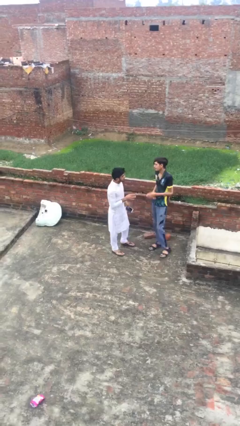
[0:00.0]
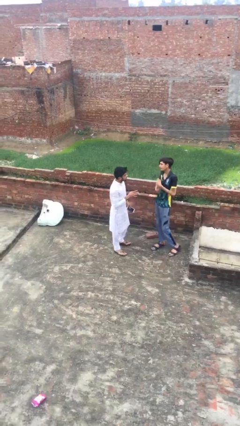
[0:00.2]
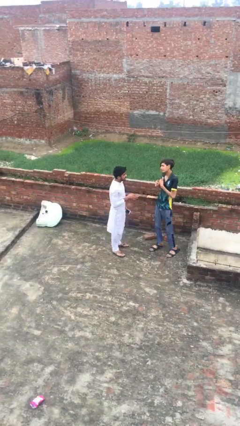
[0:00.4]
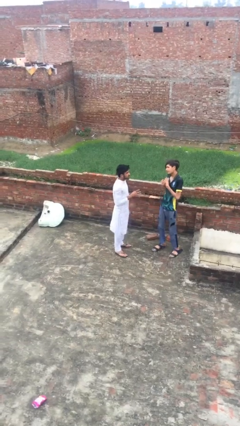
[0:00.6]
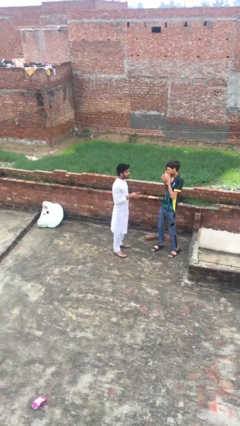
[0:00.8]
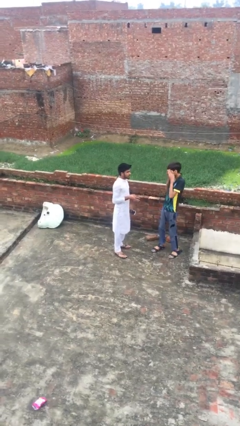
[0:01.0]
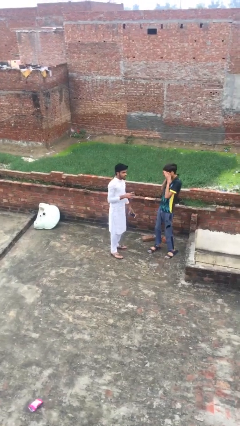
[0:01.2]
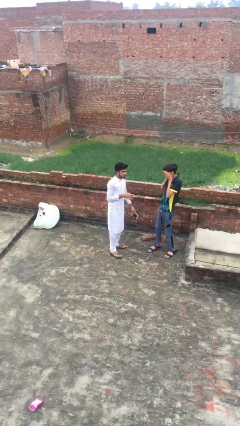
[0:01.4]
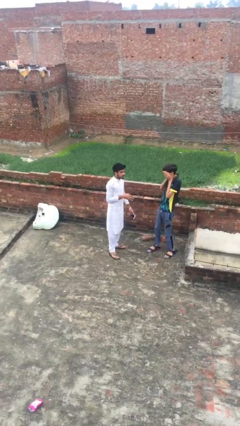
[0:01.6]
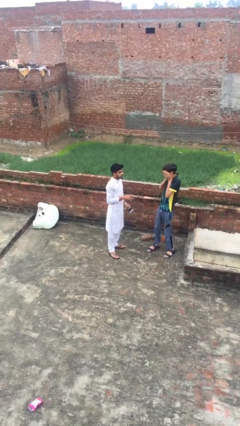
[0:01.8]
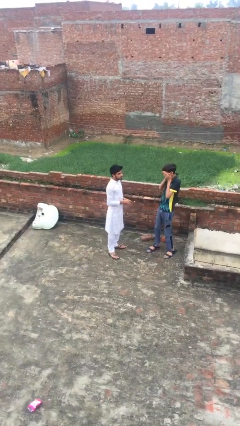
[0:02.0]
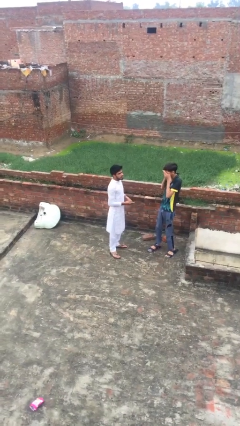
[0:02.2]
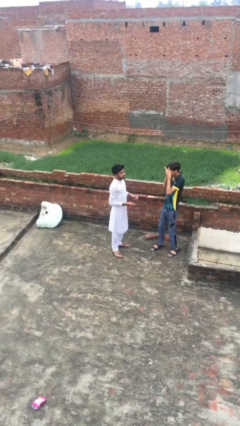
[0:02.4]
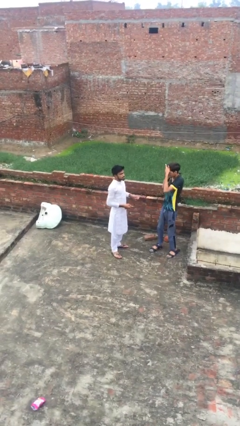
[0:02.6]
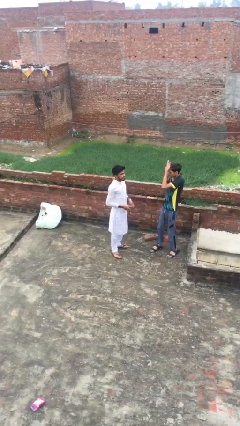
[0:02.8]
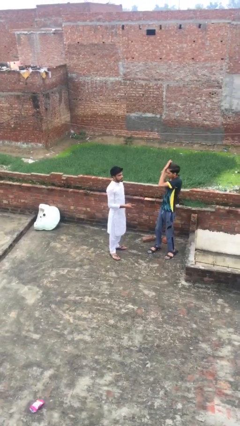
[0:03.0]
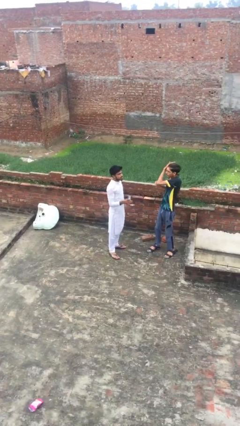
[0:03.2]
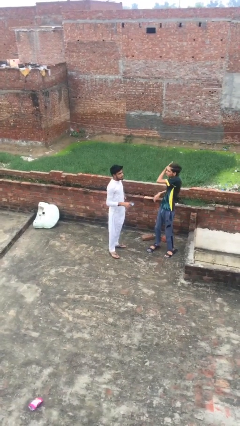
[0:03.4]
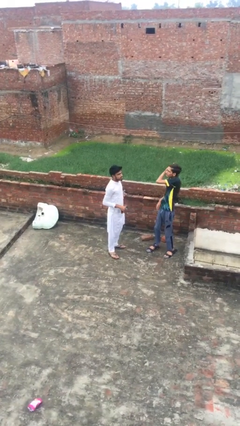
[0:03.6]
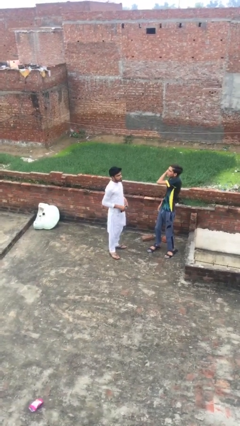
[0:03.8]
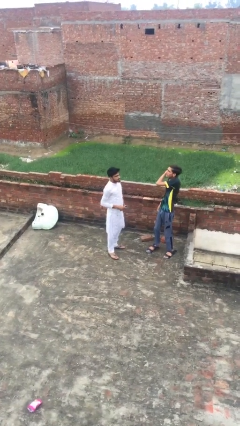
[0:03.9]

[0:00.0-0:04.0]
person talks to person

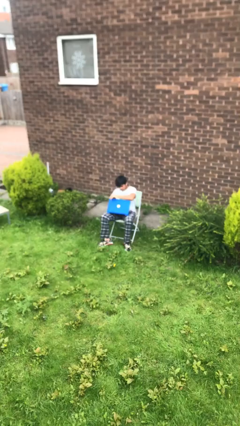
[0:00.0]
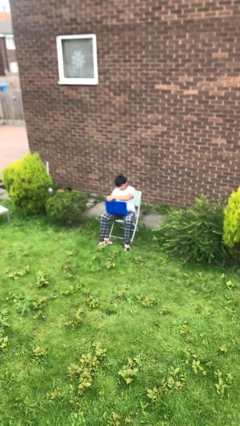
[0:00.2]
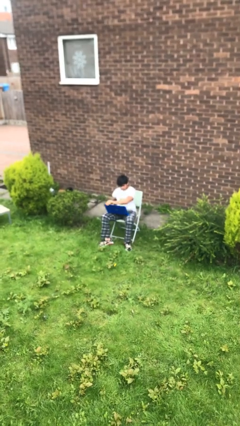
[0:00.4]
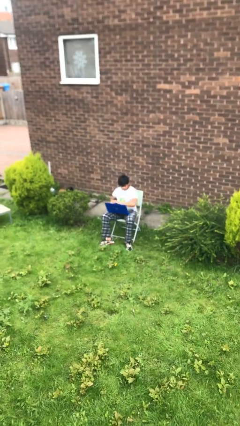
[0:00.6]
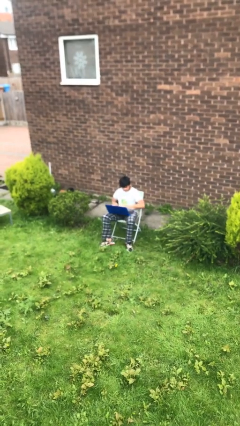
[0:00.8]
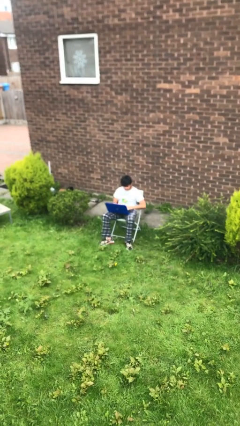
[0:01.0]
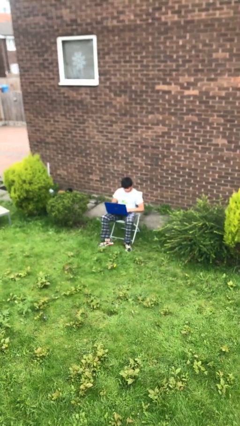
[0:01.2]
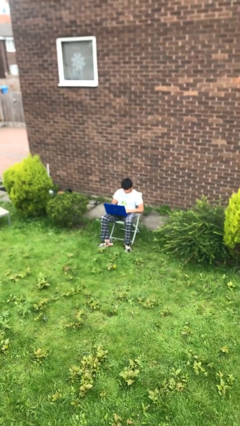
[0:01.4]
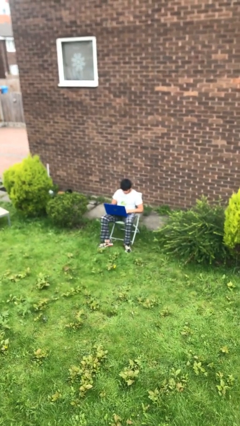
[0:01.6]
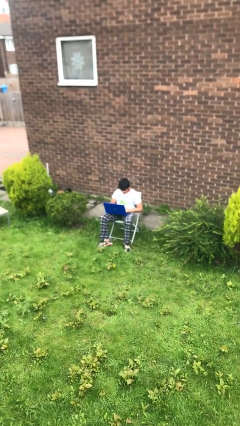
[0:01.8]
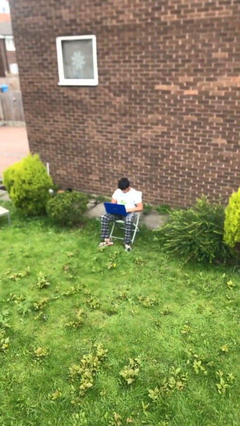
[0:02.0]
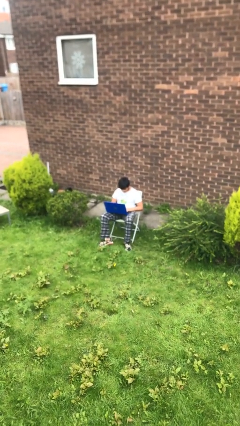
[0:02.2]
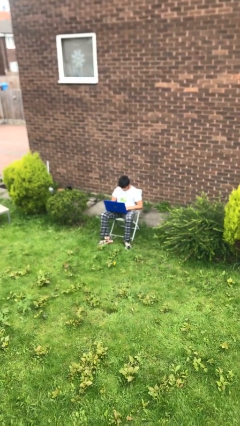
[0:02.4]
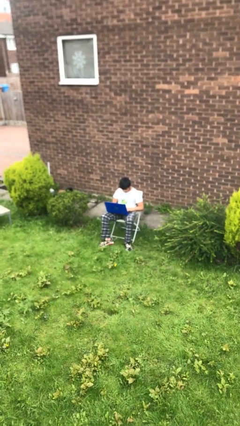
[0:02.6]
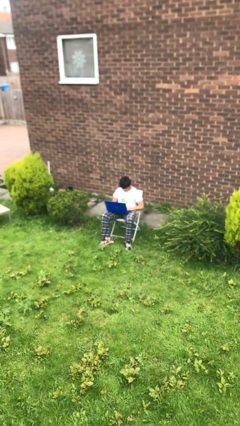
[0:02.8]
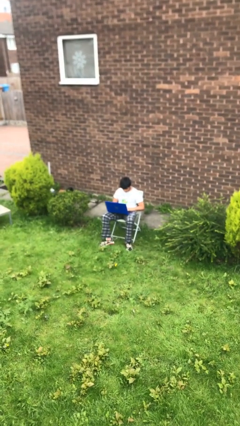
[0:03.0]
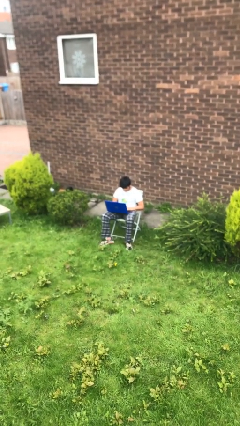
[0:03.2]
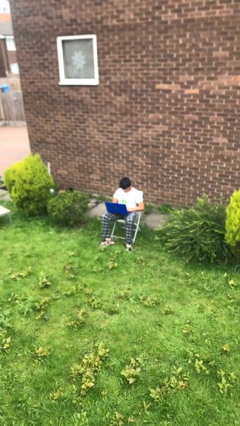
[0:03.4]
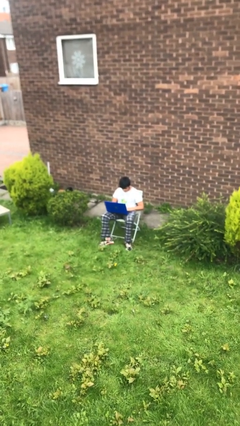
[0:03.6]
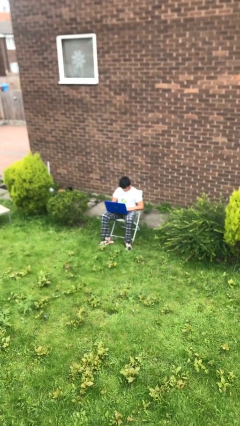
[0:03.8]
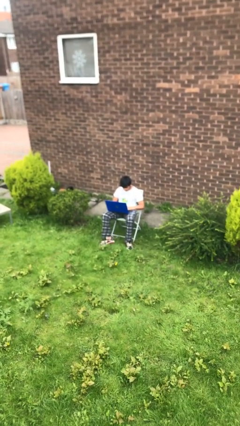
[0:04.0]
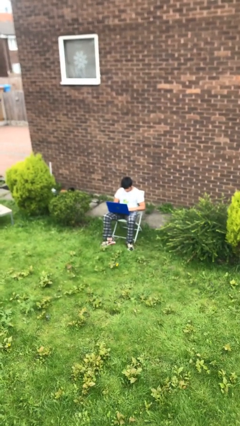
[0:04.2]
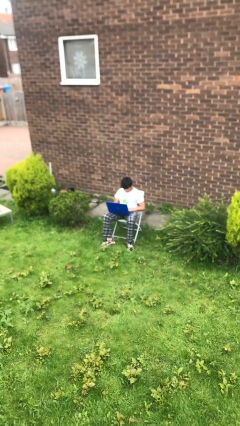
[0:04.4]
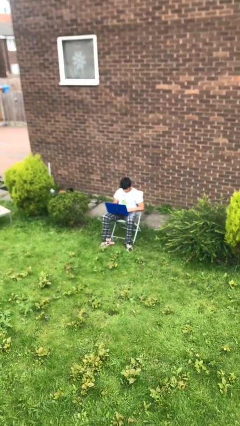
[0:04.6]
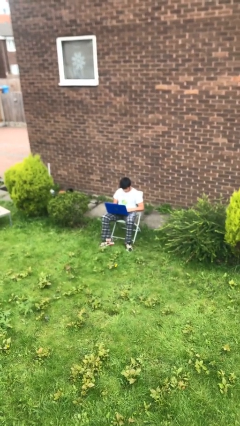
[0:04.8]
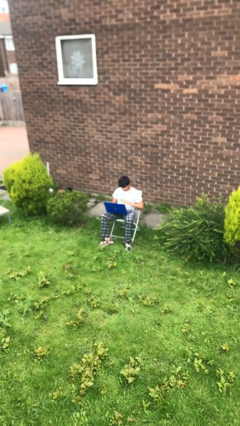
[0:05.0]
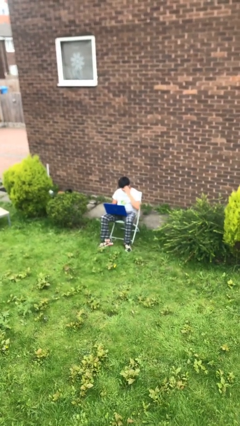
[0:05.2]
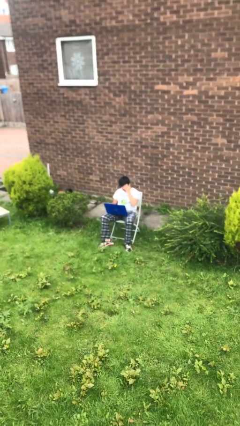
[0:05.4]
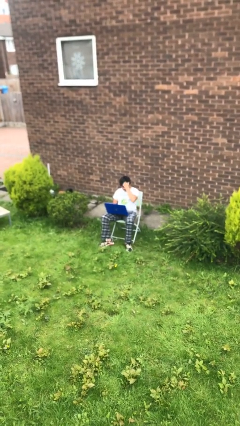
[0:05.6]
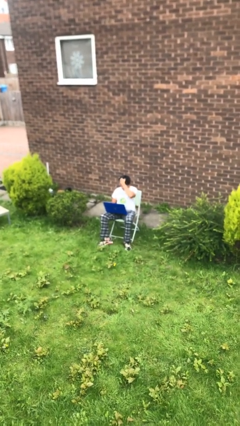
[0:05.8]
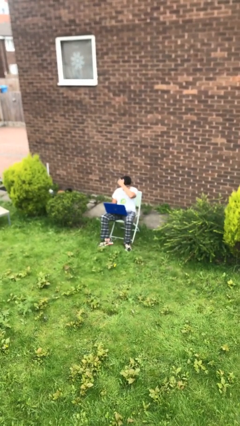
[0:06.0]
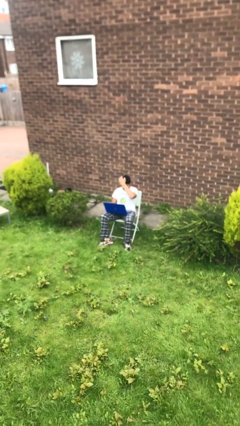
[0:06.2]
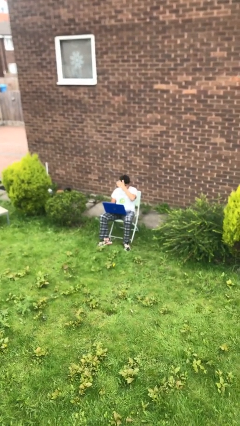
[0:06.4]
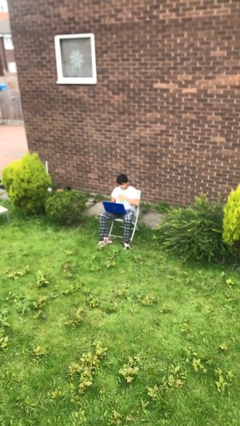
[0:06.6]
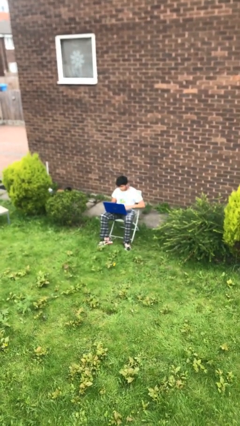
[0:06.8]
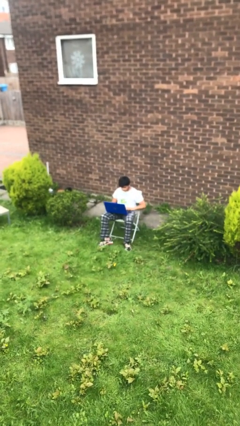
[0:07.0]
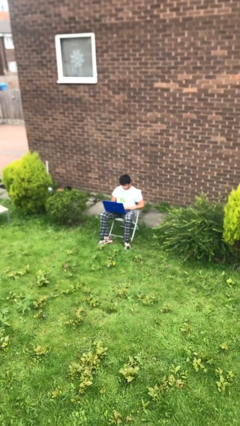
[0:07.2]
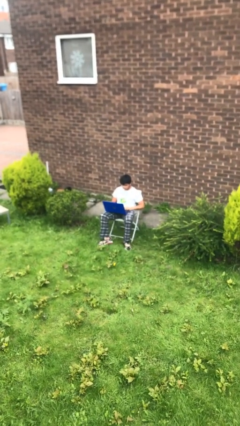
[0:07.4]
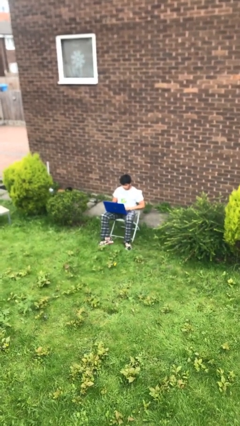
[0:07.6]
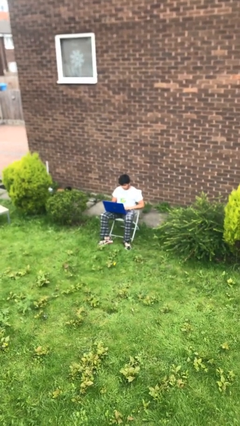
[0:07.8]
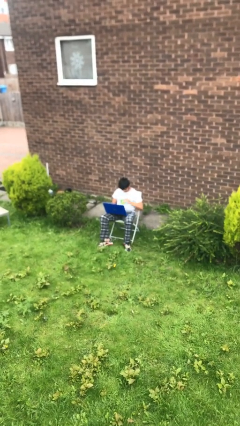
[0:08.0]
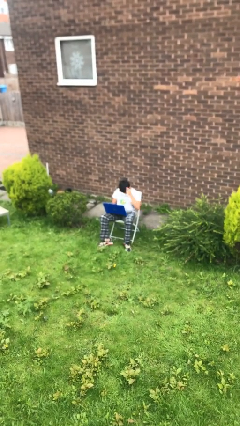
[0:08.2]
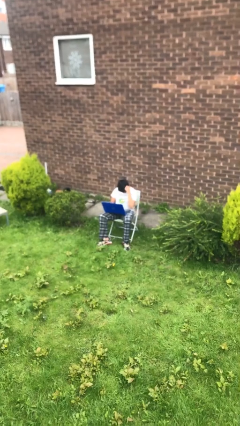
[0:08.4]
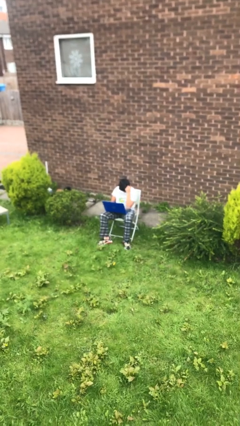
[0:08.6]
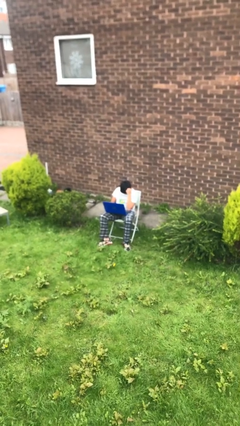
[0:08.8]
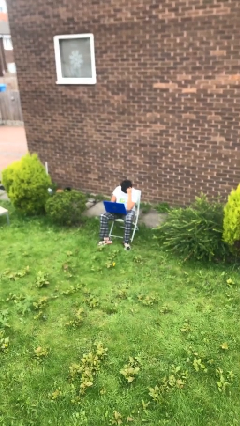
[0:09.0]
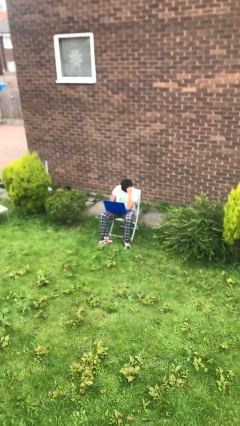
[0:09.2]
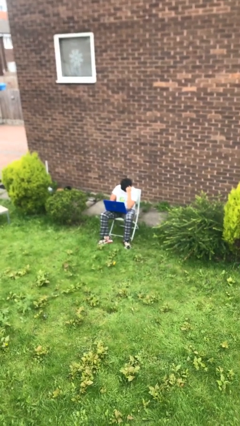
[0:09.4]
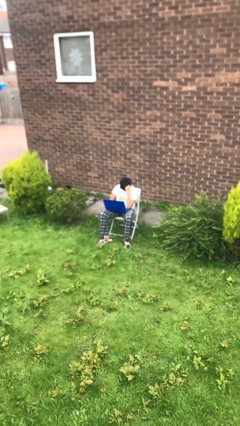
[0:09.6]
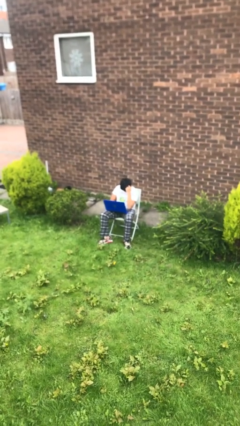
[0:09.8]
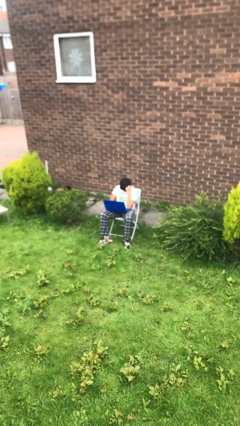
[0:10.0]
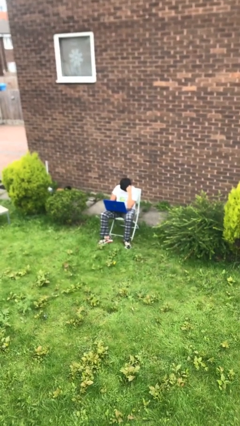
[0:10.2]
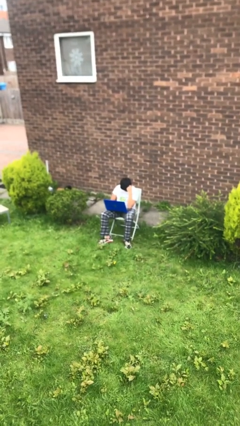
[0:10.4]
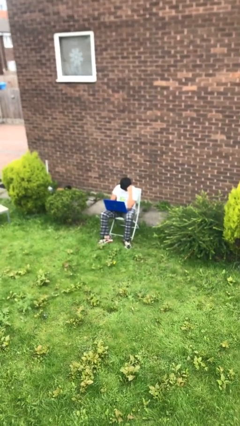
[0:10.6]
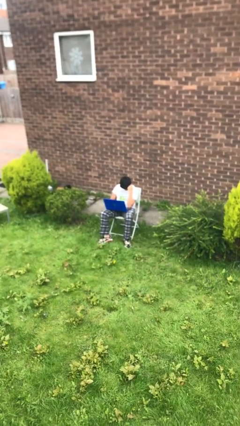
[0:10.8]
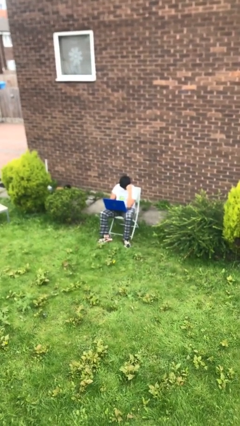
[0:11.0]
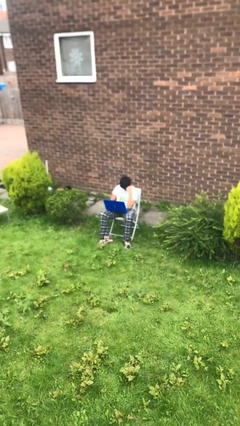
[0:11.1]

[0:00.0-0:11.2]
person interacts with laptop

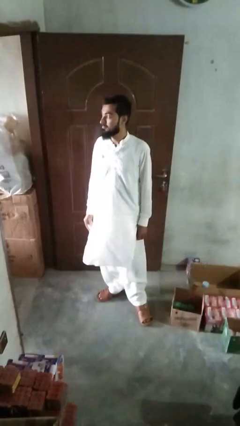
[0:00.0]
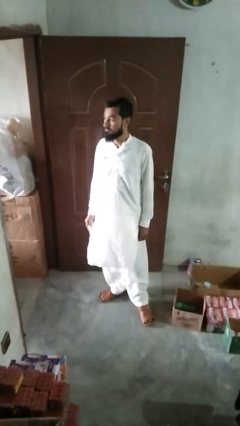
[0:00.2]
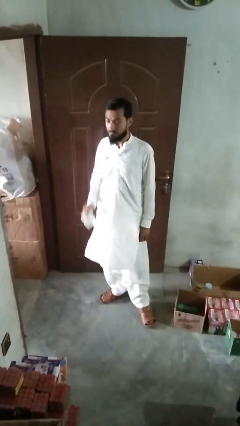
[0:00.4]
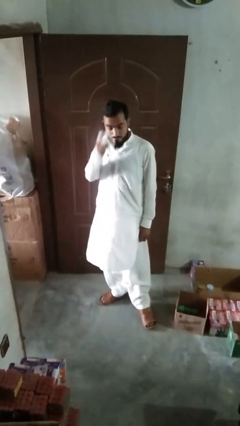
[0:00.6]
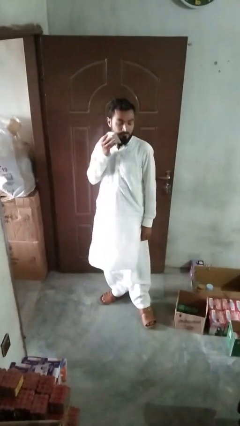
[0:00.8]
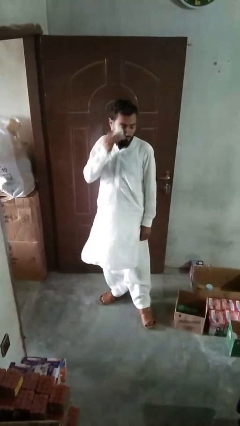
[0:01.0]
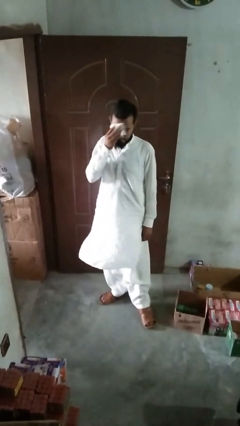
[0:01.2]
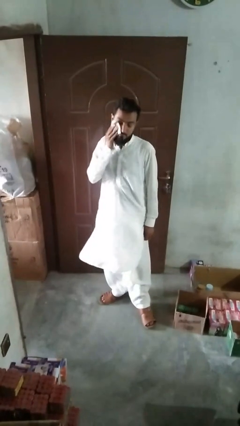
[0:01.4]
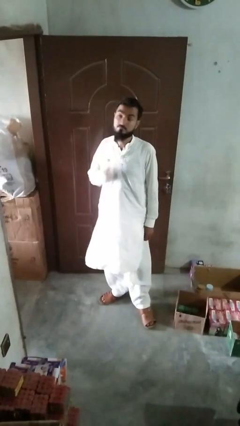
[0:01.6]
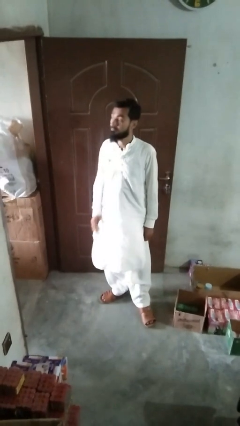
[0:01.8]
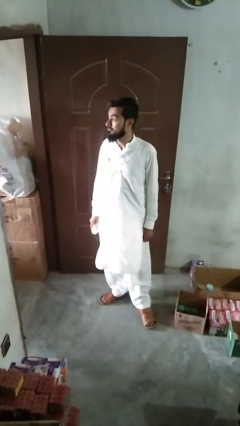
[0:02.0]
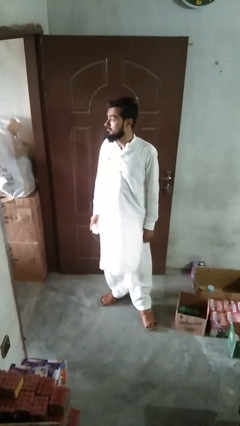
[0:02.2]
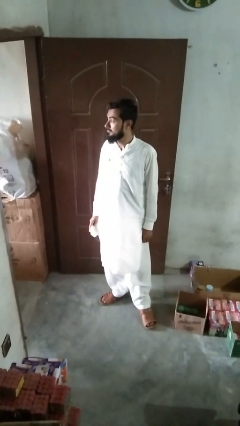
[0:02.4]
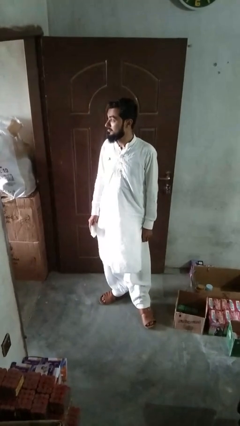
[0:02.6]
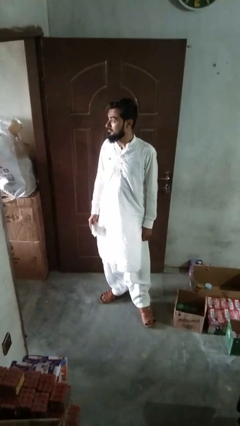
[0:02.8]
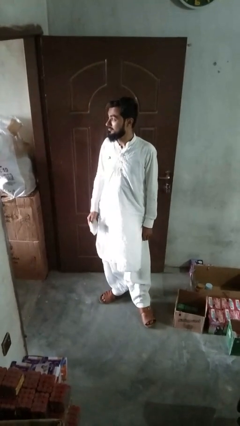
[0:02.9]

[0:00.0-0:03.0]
person wipes mouth with napkin
